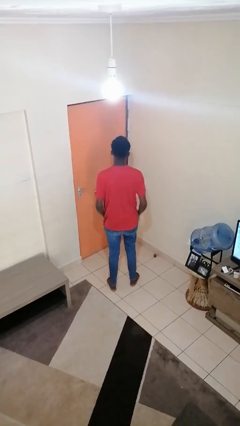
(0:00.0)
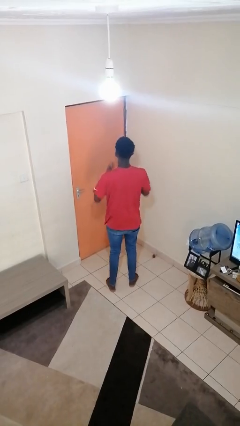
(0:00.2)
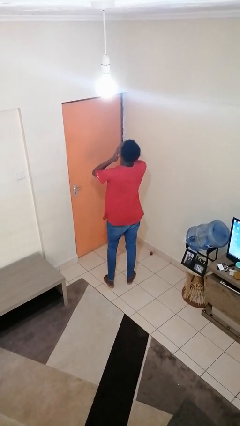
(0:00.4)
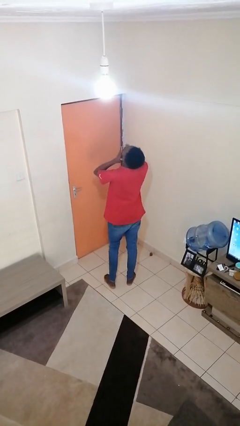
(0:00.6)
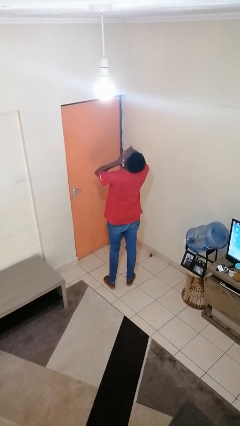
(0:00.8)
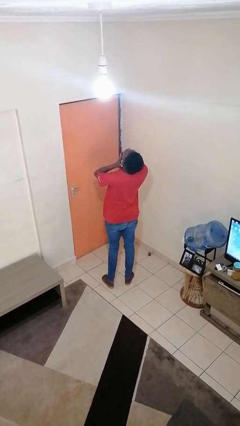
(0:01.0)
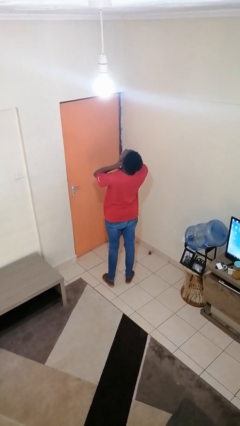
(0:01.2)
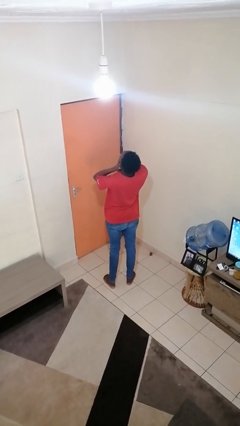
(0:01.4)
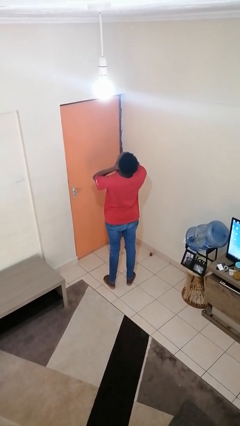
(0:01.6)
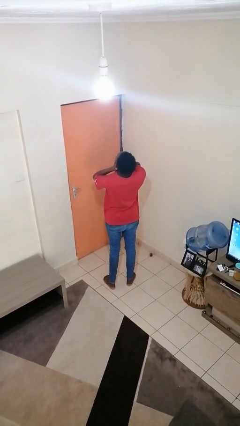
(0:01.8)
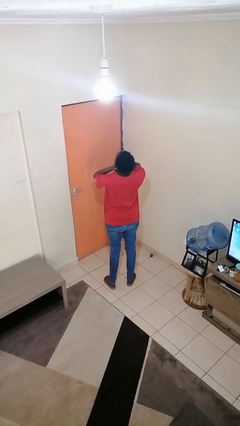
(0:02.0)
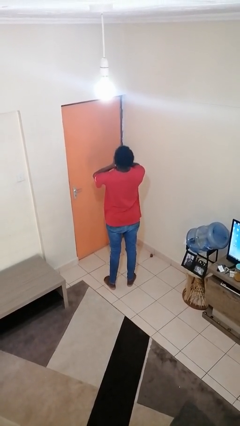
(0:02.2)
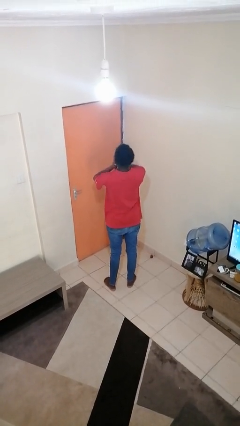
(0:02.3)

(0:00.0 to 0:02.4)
person yawns

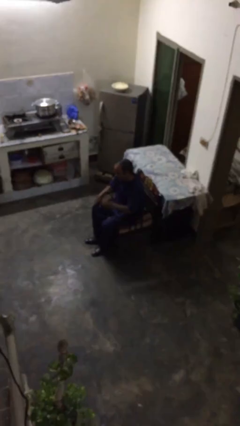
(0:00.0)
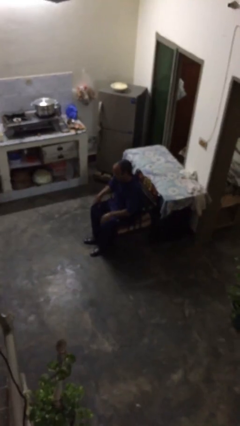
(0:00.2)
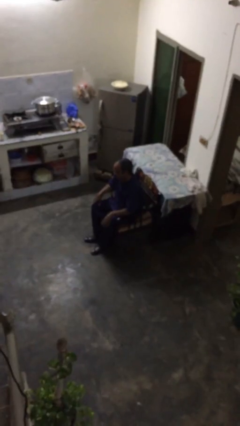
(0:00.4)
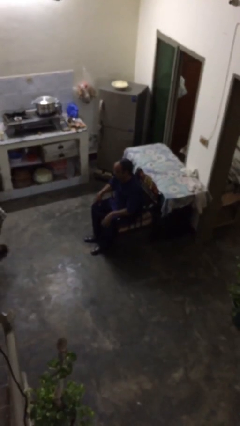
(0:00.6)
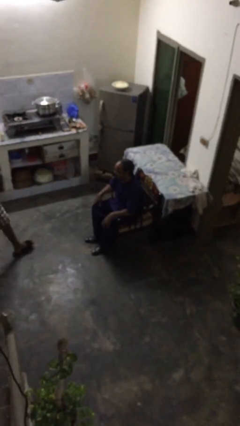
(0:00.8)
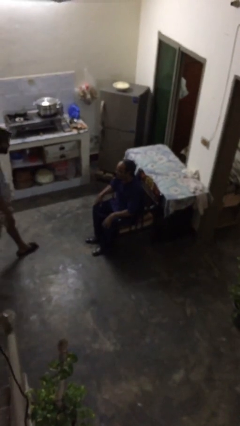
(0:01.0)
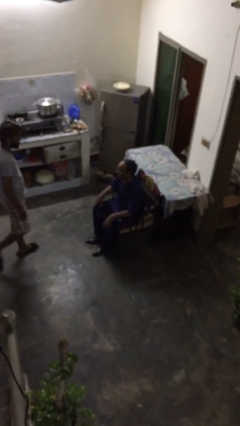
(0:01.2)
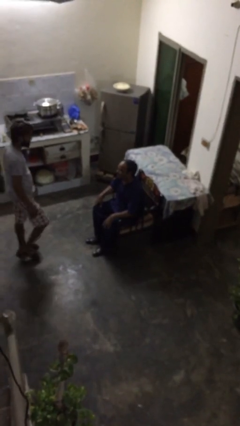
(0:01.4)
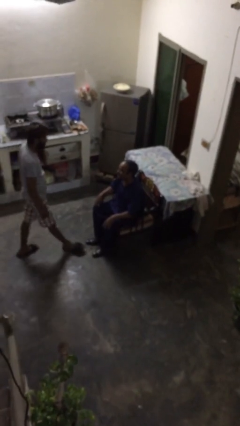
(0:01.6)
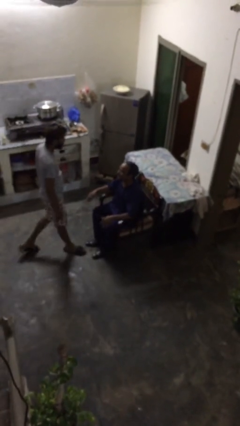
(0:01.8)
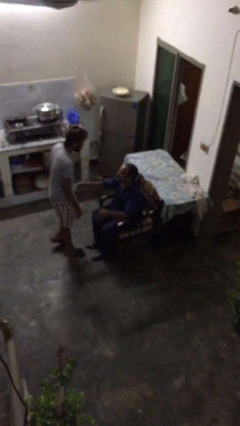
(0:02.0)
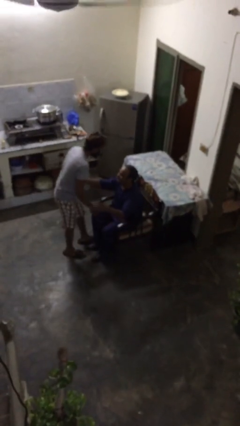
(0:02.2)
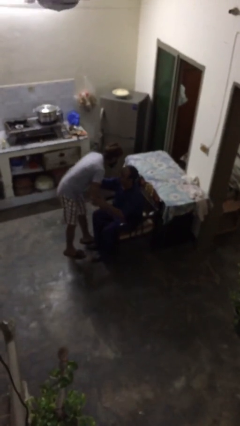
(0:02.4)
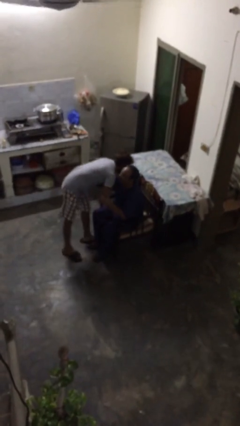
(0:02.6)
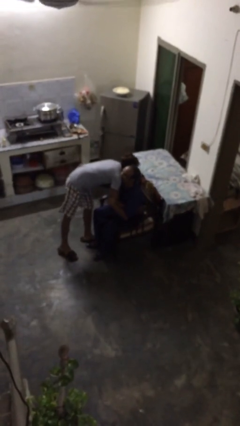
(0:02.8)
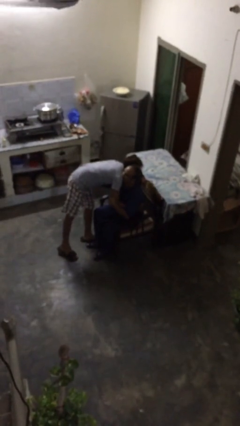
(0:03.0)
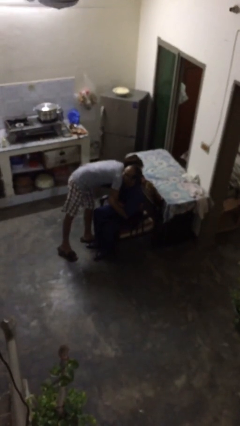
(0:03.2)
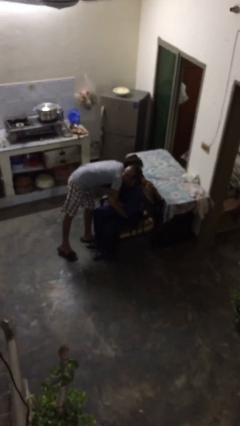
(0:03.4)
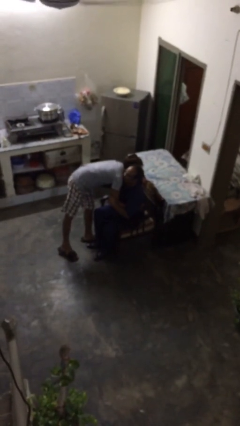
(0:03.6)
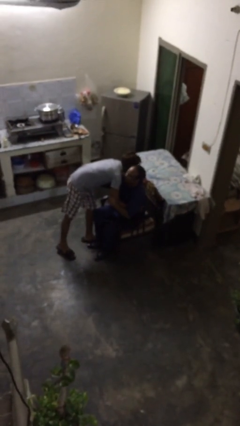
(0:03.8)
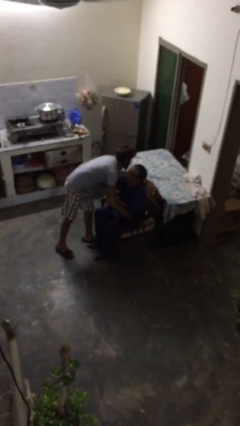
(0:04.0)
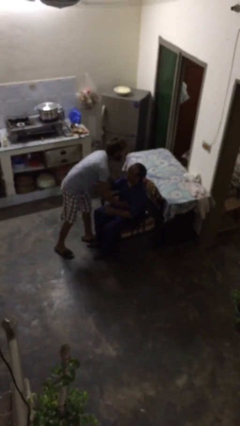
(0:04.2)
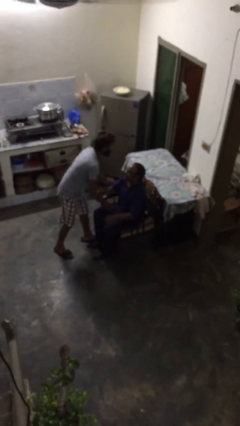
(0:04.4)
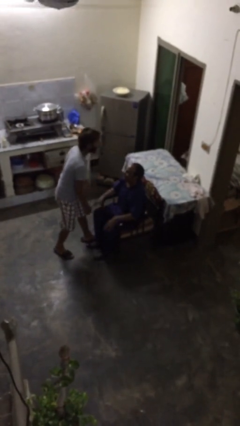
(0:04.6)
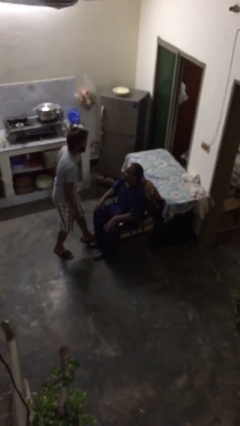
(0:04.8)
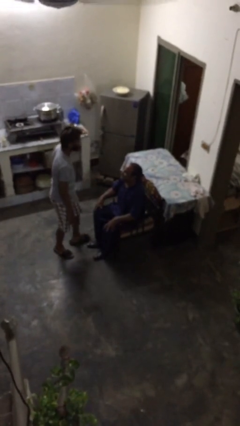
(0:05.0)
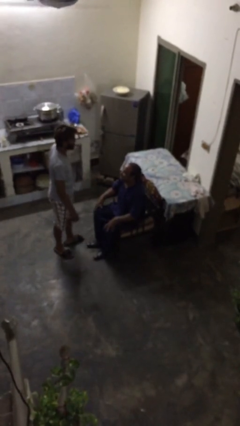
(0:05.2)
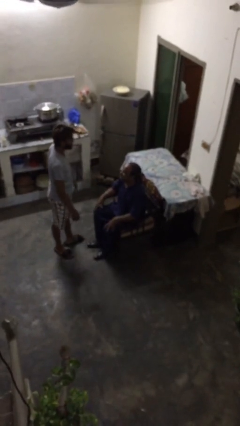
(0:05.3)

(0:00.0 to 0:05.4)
person embraces person

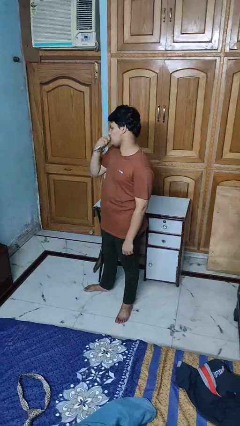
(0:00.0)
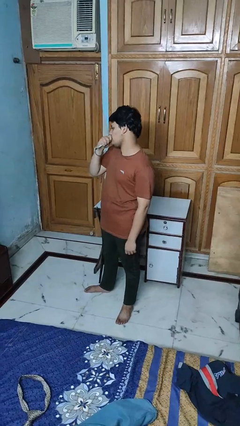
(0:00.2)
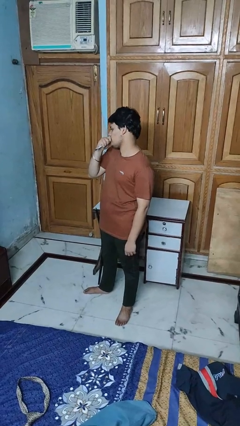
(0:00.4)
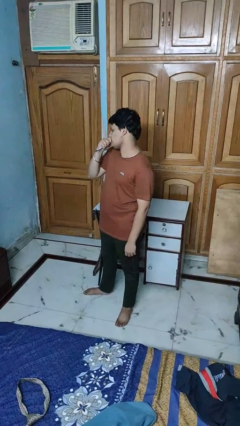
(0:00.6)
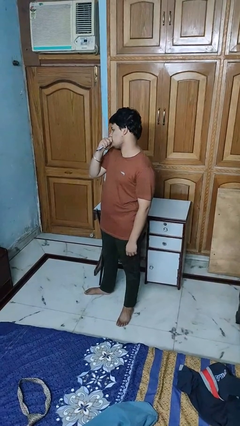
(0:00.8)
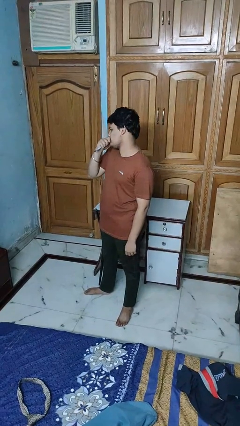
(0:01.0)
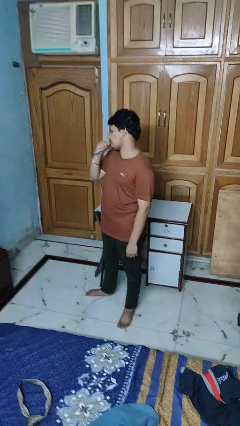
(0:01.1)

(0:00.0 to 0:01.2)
person vapes

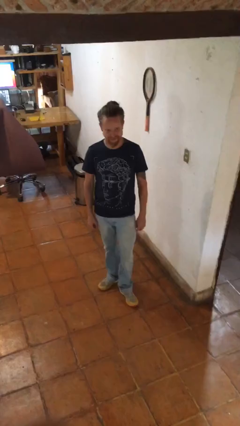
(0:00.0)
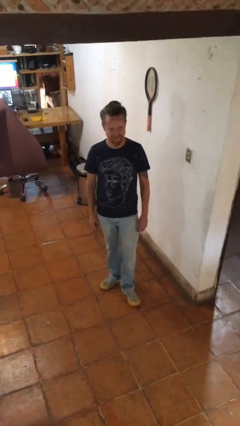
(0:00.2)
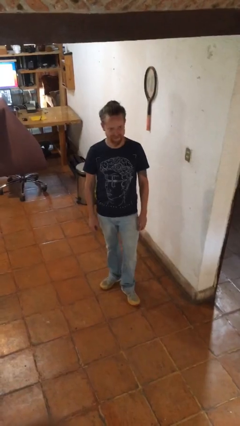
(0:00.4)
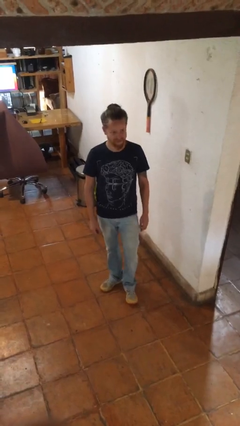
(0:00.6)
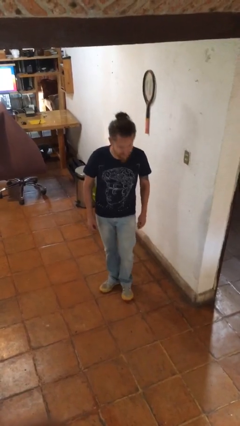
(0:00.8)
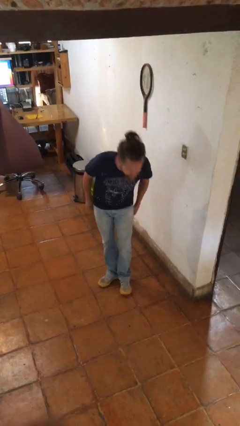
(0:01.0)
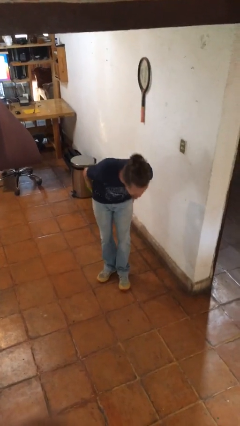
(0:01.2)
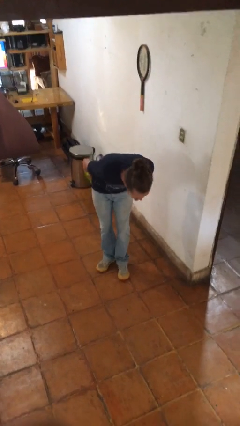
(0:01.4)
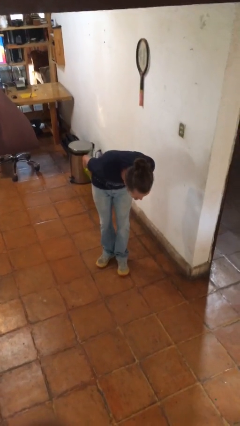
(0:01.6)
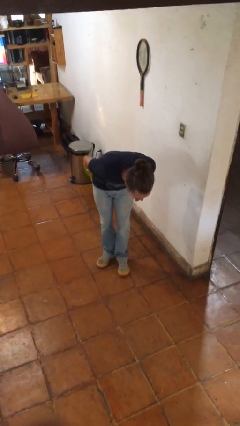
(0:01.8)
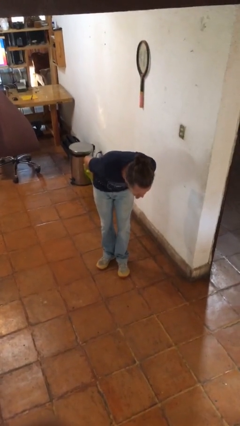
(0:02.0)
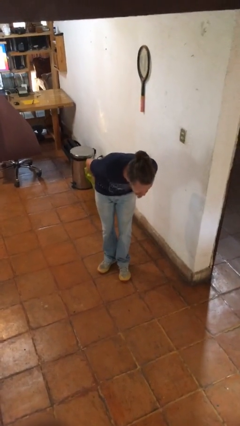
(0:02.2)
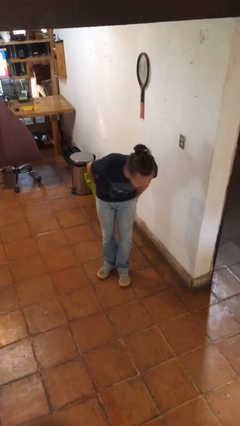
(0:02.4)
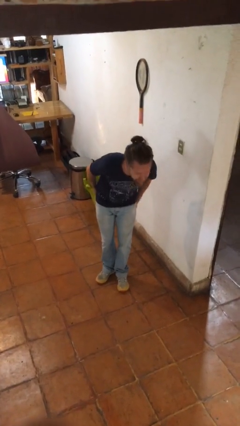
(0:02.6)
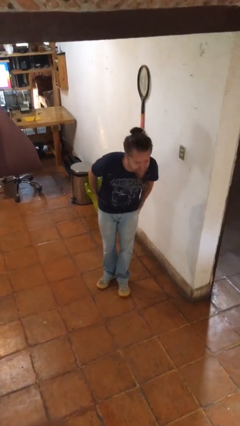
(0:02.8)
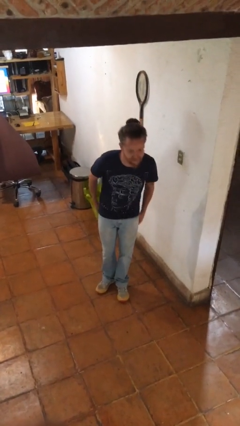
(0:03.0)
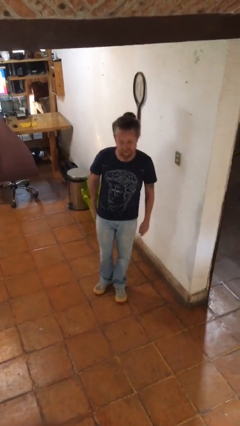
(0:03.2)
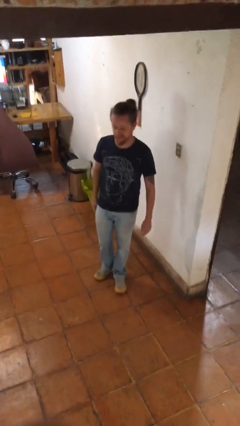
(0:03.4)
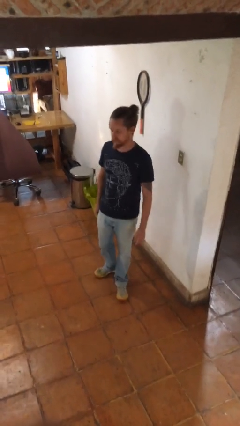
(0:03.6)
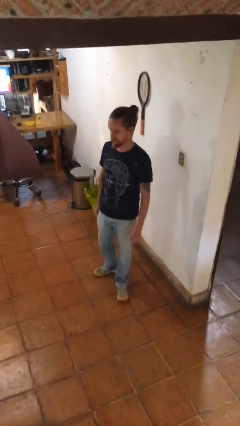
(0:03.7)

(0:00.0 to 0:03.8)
person bows

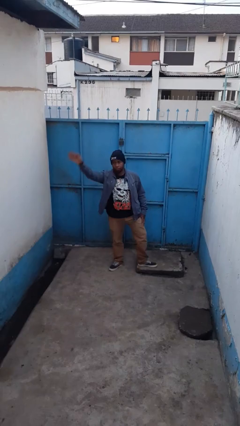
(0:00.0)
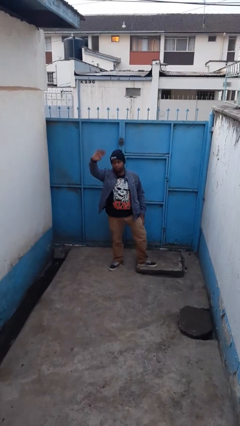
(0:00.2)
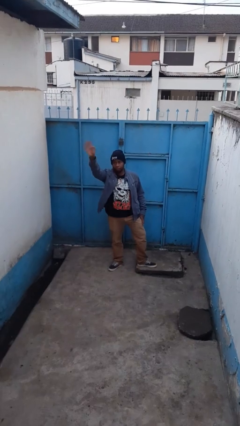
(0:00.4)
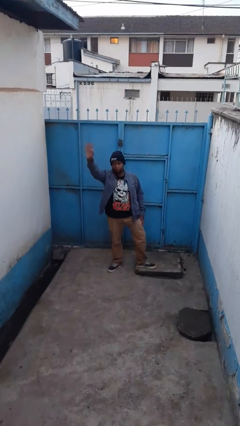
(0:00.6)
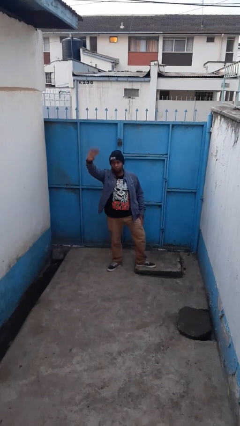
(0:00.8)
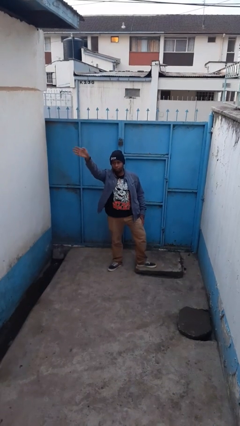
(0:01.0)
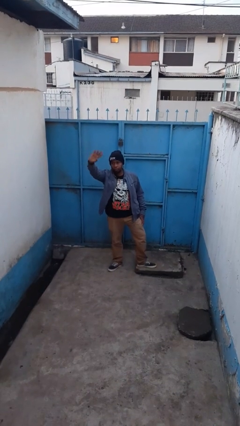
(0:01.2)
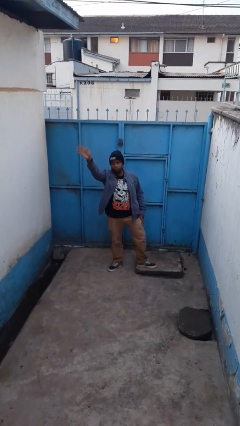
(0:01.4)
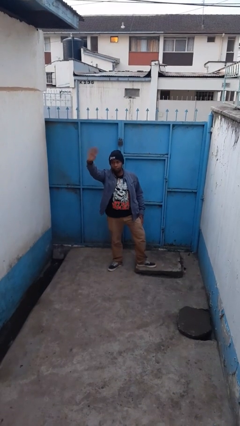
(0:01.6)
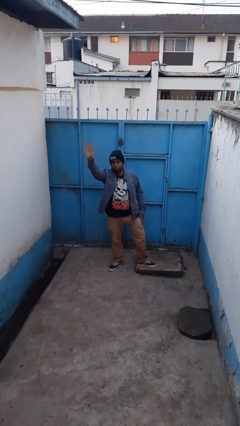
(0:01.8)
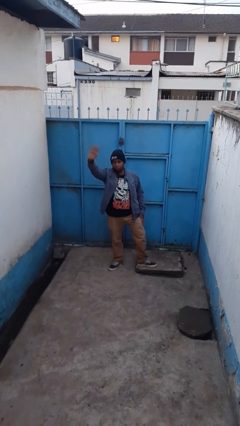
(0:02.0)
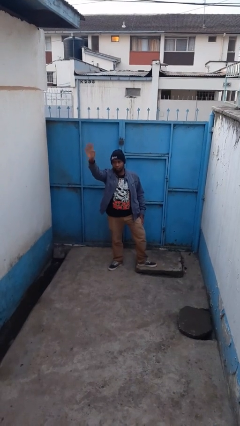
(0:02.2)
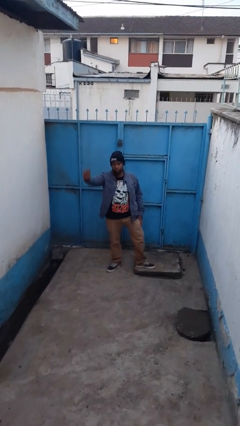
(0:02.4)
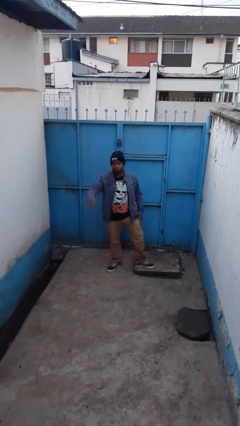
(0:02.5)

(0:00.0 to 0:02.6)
person waves at person

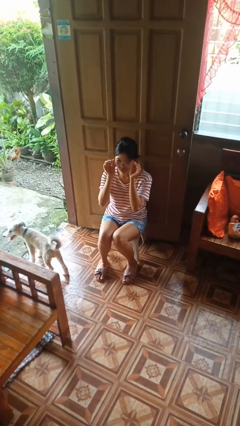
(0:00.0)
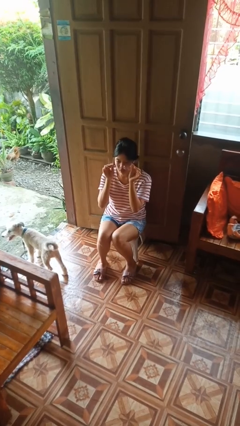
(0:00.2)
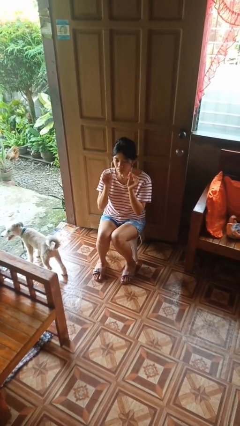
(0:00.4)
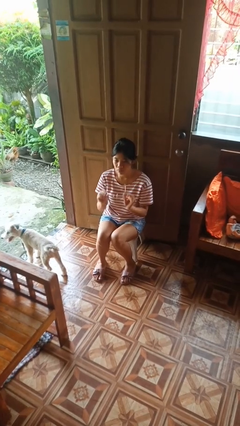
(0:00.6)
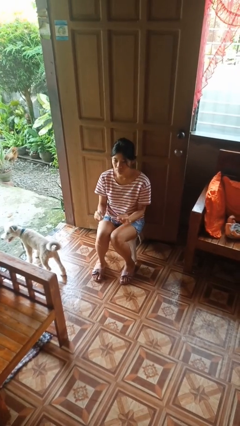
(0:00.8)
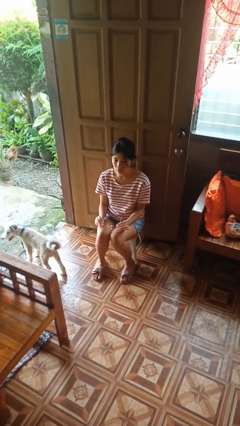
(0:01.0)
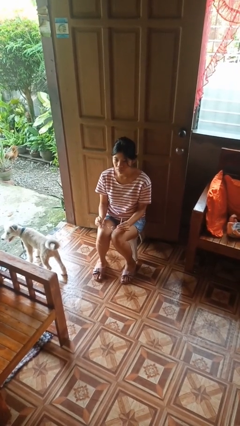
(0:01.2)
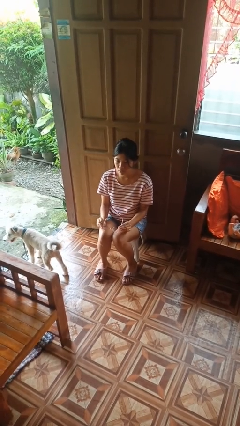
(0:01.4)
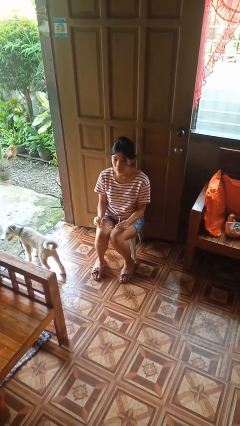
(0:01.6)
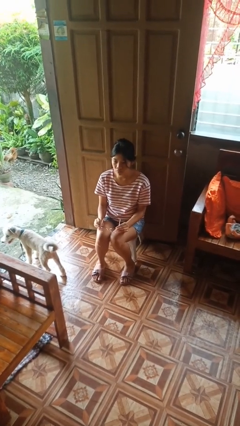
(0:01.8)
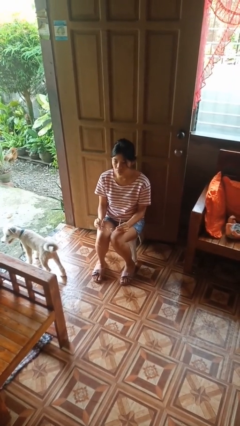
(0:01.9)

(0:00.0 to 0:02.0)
person takes off glasses
